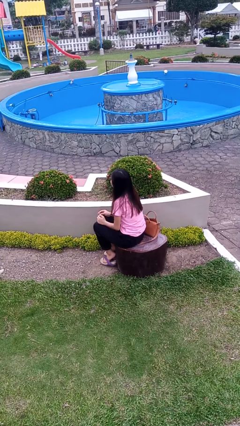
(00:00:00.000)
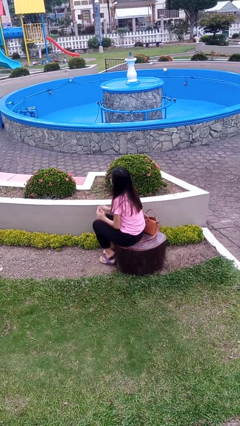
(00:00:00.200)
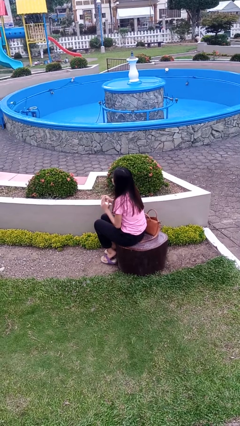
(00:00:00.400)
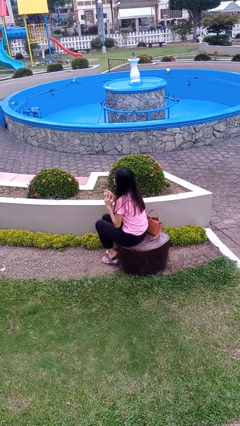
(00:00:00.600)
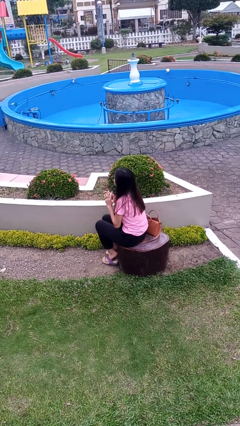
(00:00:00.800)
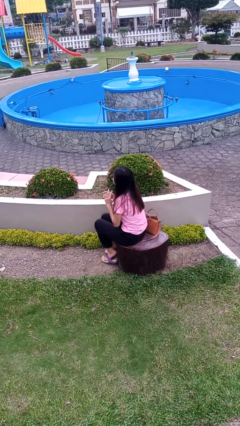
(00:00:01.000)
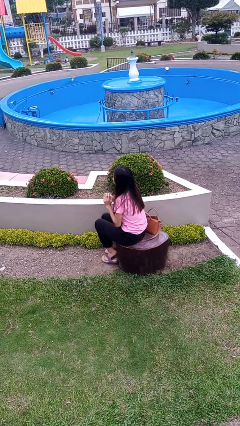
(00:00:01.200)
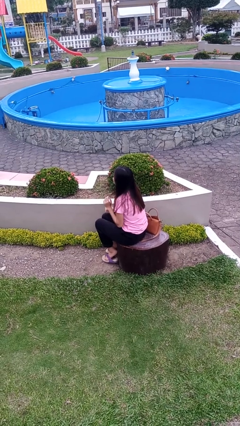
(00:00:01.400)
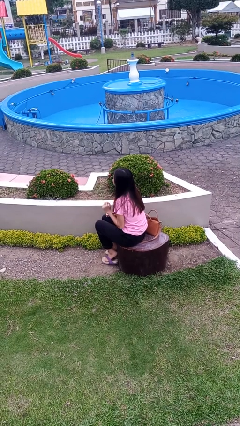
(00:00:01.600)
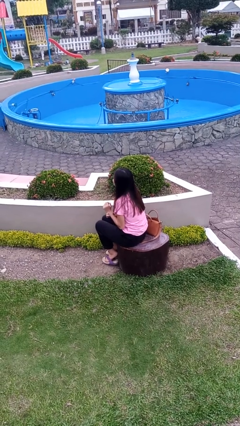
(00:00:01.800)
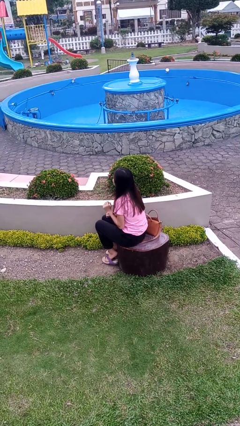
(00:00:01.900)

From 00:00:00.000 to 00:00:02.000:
person puts on ring

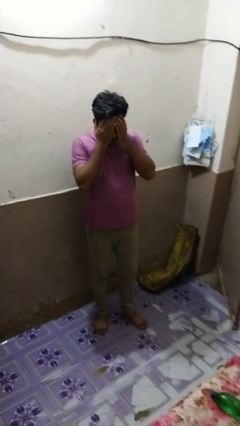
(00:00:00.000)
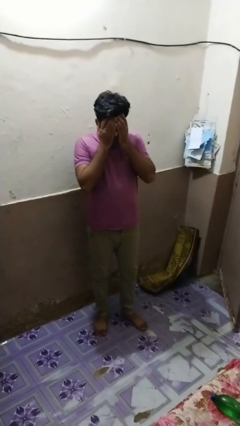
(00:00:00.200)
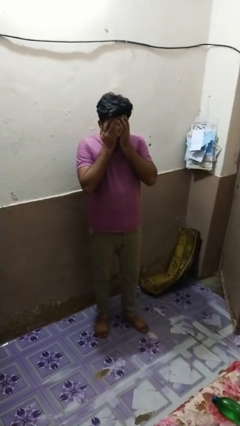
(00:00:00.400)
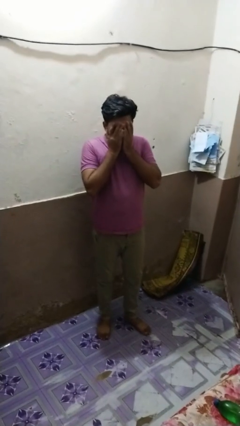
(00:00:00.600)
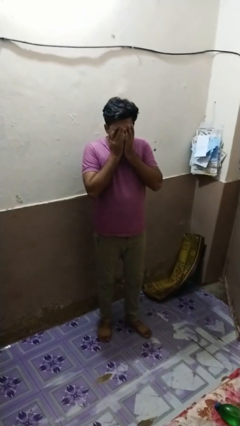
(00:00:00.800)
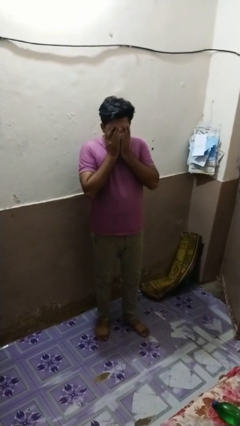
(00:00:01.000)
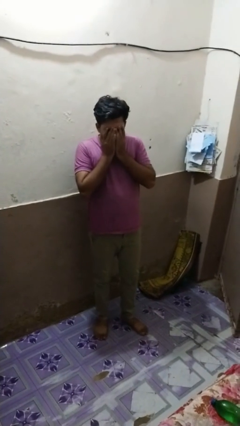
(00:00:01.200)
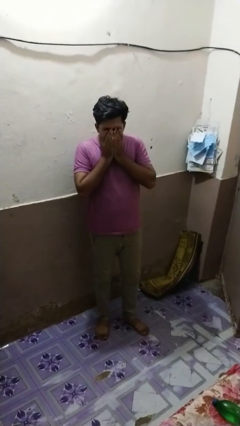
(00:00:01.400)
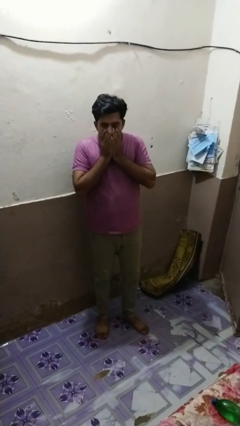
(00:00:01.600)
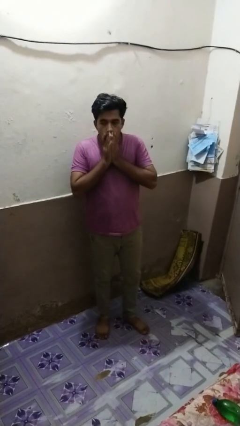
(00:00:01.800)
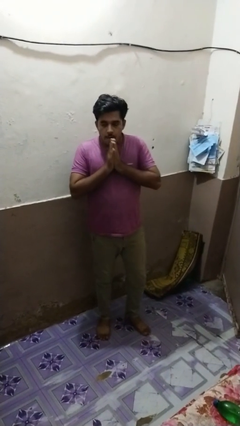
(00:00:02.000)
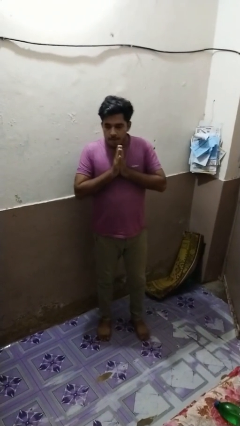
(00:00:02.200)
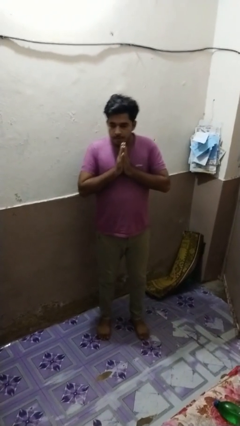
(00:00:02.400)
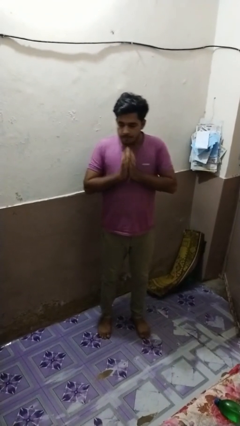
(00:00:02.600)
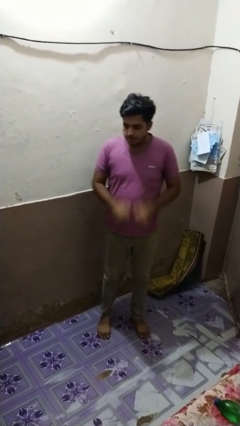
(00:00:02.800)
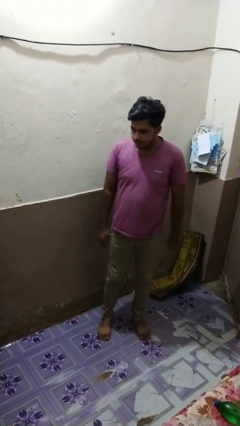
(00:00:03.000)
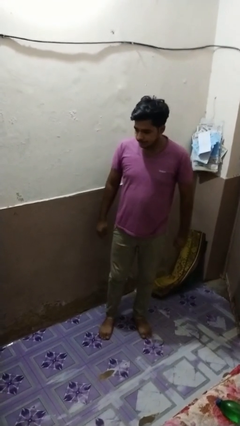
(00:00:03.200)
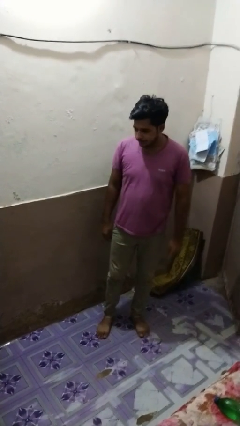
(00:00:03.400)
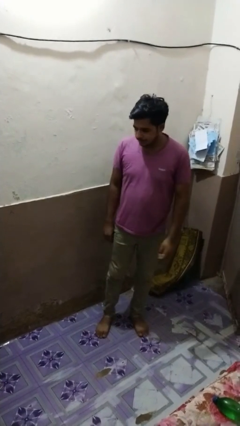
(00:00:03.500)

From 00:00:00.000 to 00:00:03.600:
person covers face with hands

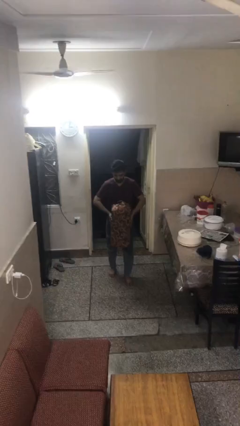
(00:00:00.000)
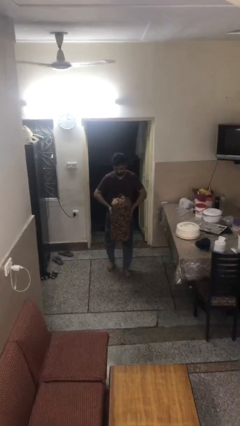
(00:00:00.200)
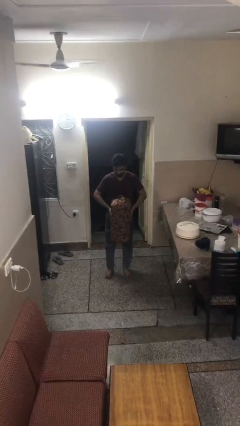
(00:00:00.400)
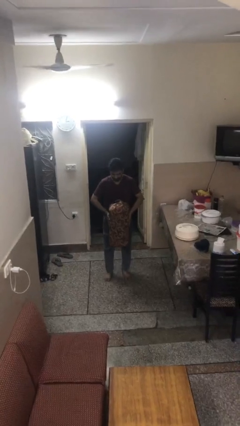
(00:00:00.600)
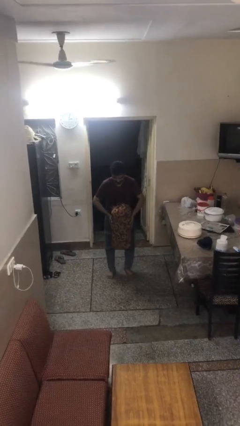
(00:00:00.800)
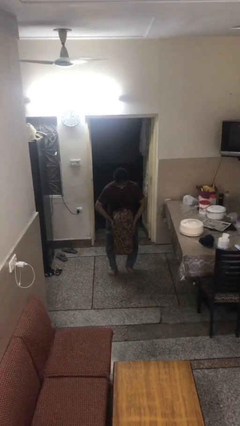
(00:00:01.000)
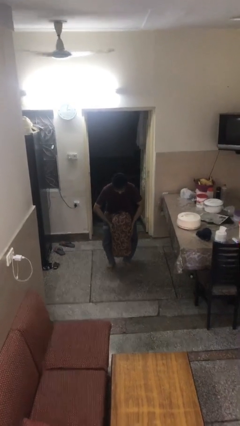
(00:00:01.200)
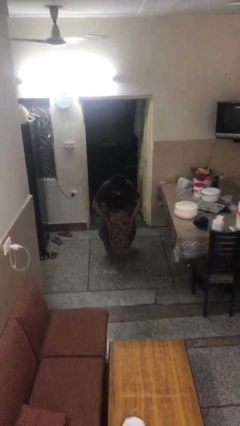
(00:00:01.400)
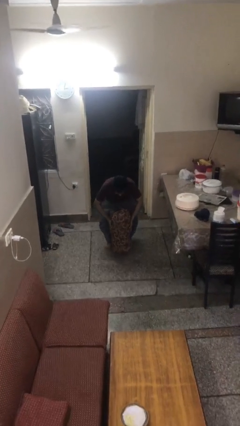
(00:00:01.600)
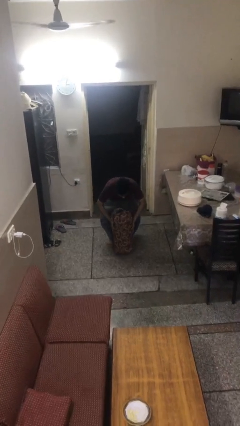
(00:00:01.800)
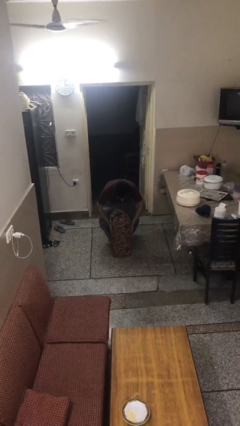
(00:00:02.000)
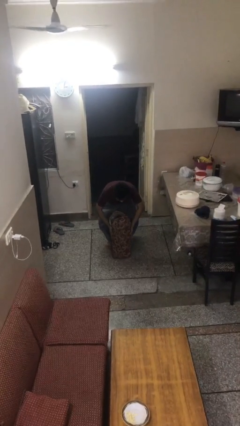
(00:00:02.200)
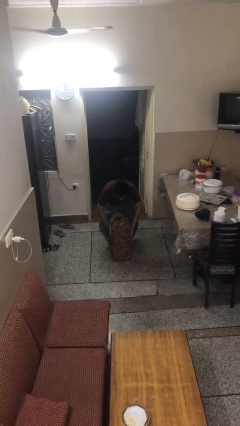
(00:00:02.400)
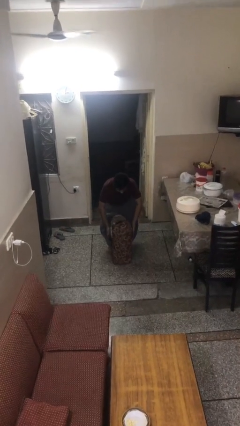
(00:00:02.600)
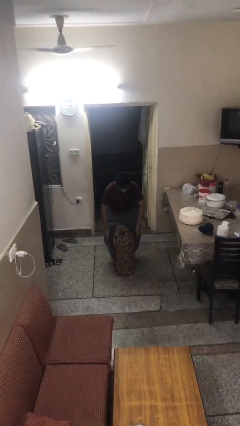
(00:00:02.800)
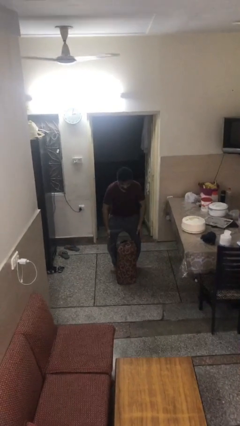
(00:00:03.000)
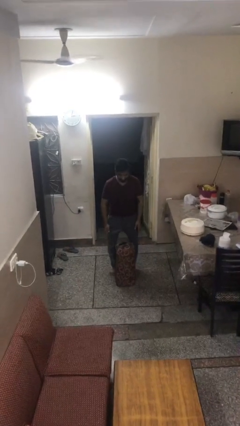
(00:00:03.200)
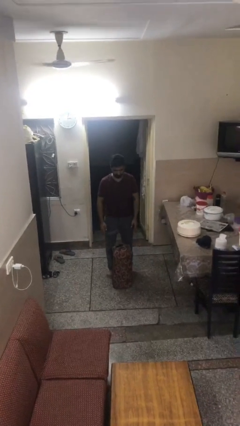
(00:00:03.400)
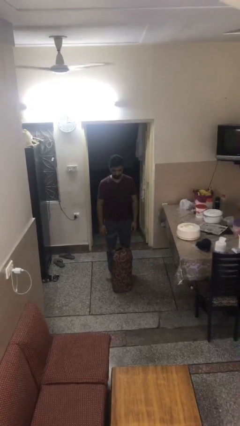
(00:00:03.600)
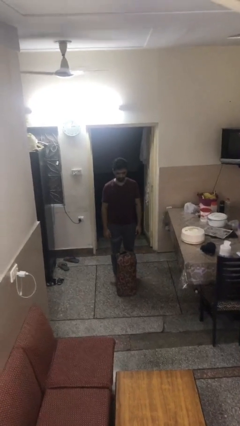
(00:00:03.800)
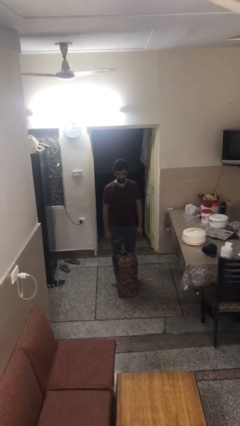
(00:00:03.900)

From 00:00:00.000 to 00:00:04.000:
person puts down object on floor

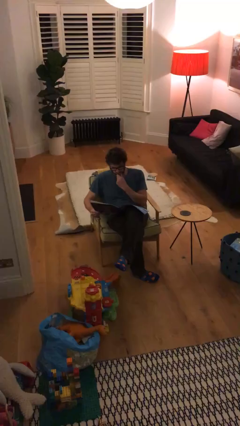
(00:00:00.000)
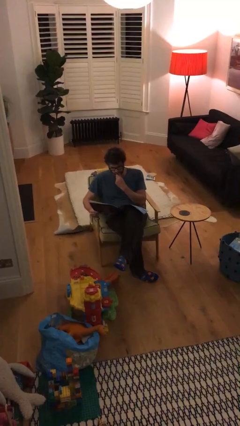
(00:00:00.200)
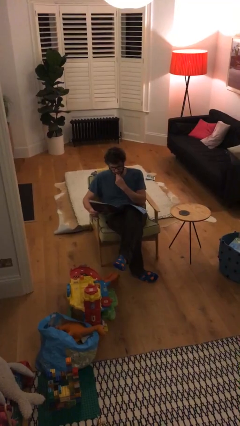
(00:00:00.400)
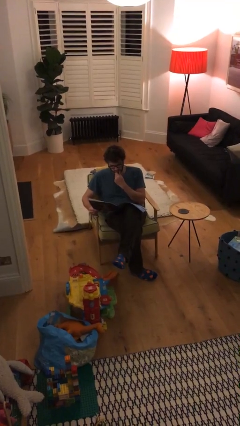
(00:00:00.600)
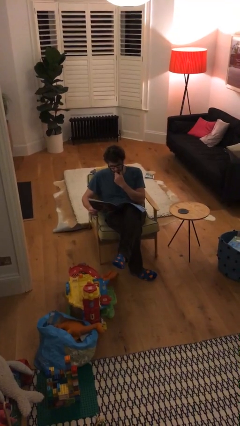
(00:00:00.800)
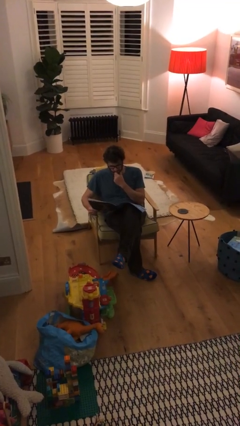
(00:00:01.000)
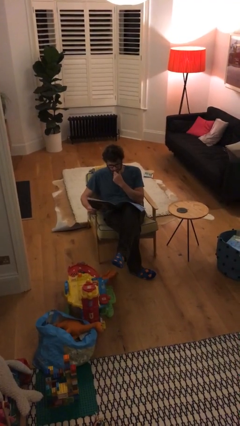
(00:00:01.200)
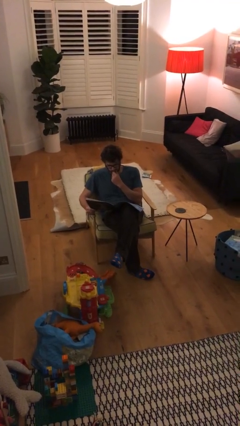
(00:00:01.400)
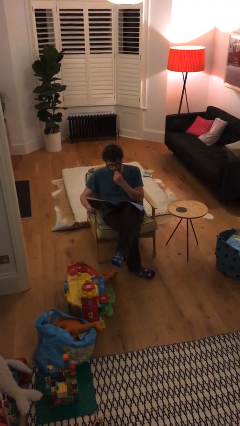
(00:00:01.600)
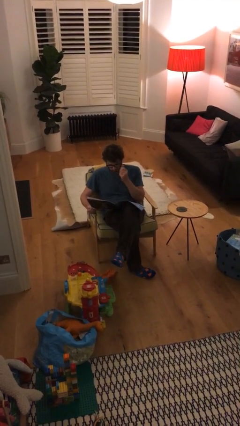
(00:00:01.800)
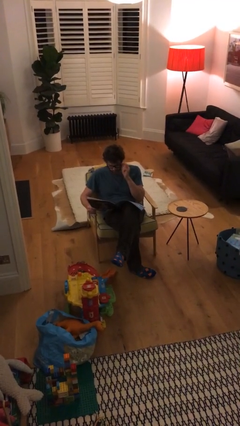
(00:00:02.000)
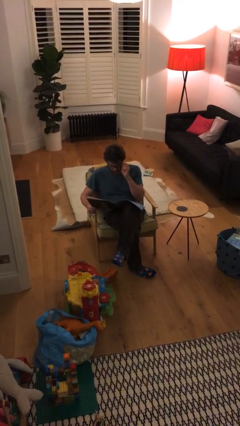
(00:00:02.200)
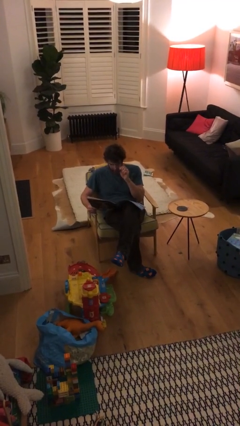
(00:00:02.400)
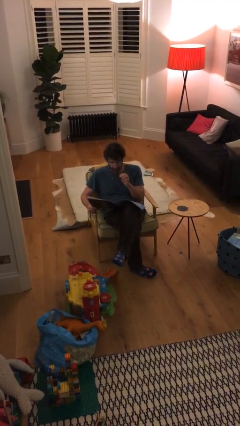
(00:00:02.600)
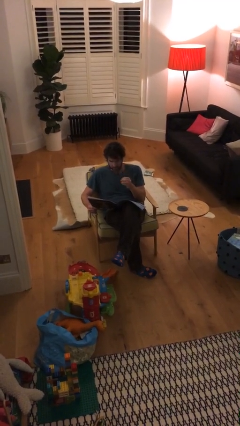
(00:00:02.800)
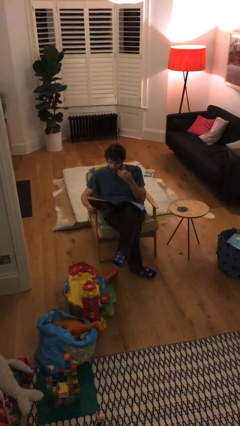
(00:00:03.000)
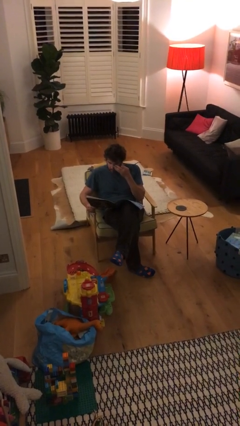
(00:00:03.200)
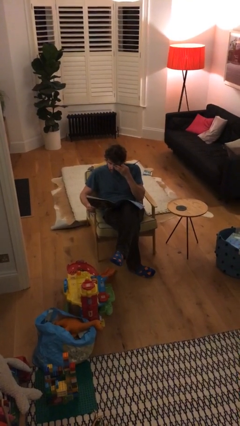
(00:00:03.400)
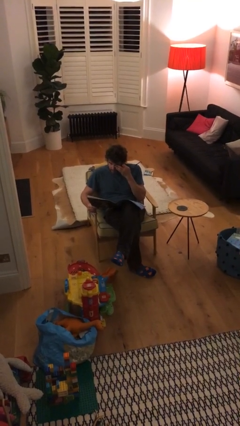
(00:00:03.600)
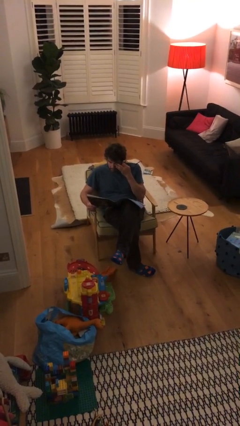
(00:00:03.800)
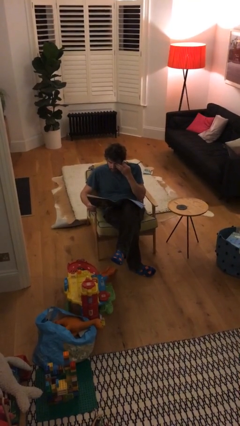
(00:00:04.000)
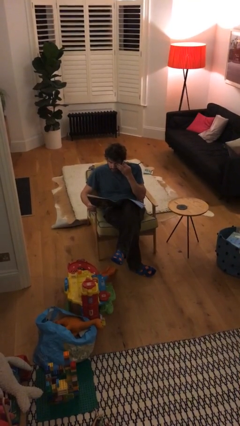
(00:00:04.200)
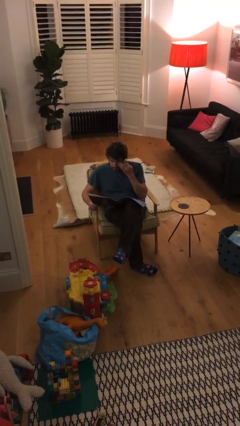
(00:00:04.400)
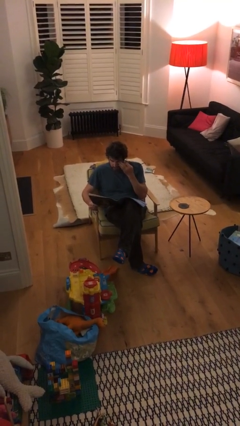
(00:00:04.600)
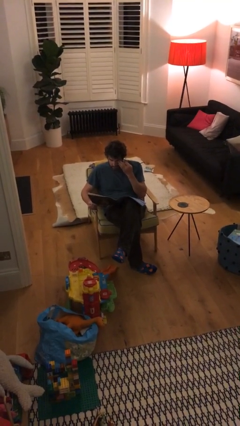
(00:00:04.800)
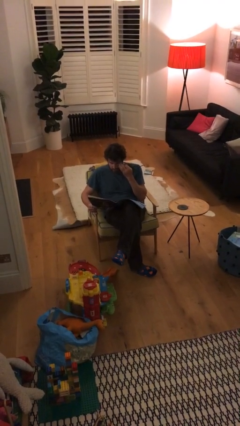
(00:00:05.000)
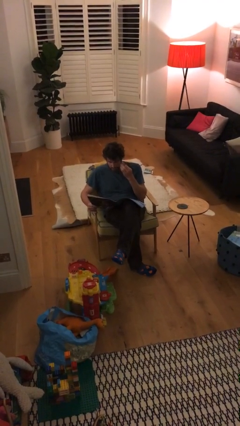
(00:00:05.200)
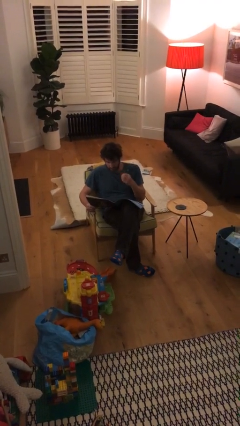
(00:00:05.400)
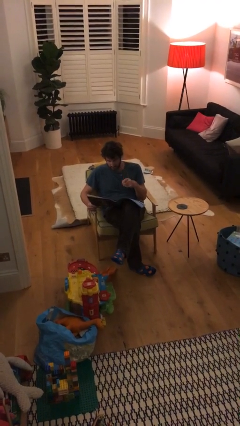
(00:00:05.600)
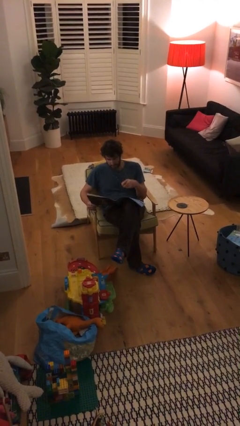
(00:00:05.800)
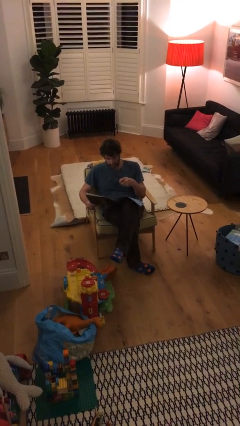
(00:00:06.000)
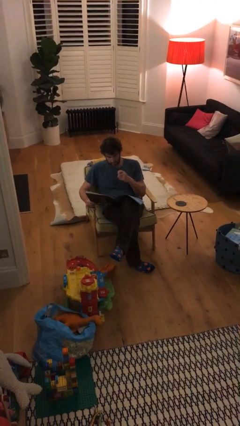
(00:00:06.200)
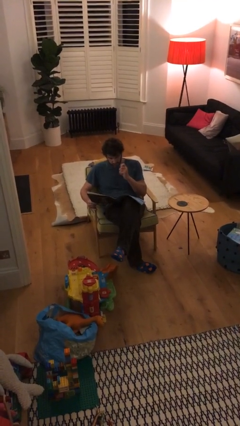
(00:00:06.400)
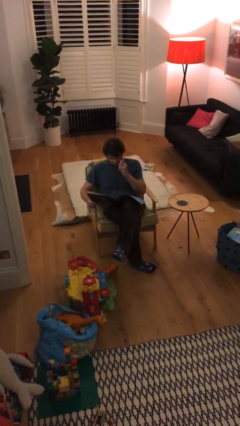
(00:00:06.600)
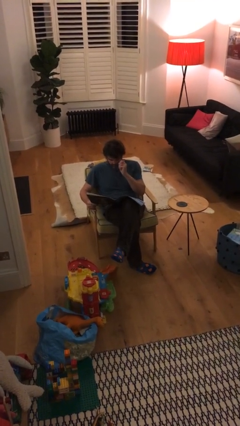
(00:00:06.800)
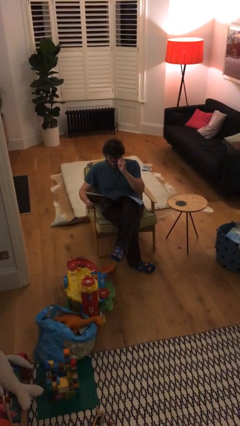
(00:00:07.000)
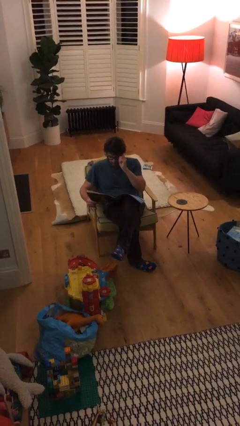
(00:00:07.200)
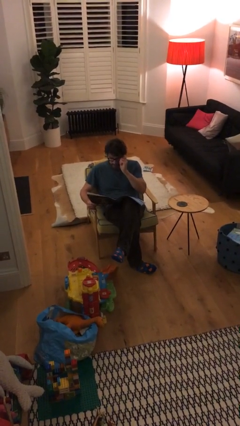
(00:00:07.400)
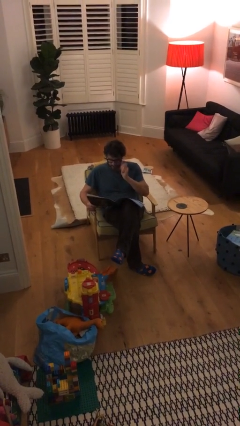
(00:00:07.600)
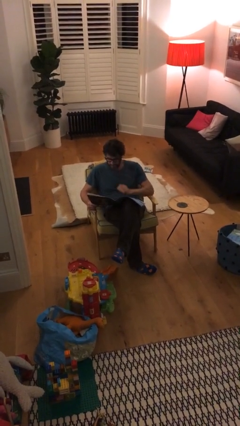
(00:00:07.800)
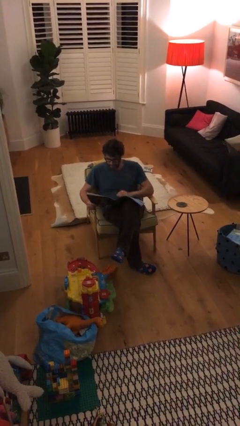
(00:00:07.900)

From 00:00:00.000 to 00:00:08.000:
person reads document
